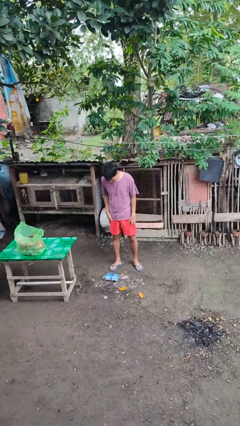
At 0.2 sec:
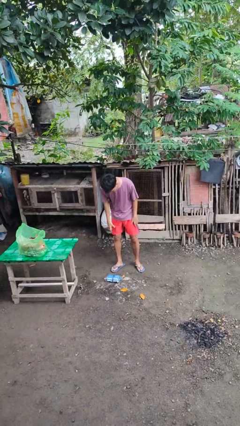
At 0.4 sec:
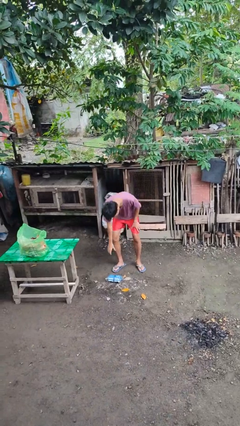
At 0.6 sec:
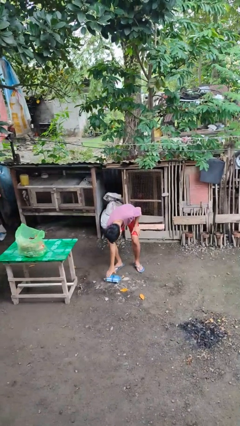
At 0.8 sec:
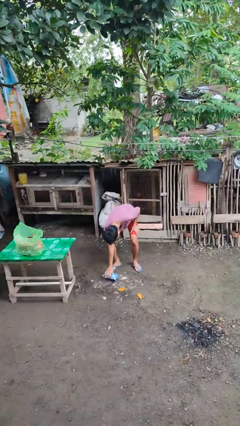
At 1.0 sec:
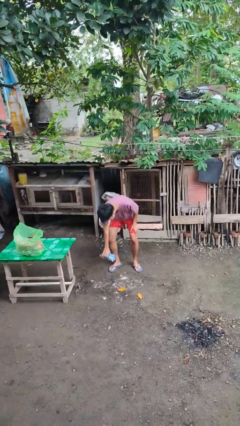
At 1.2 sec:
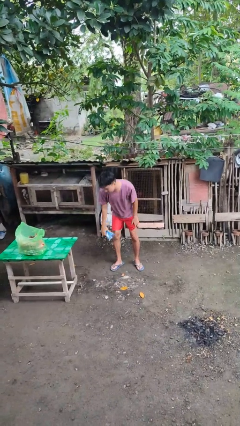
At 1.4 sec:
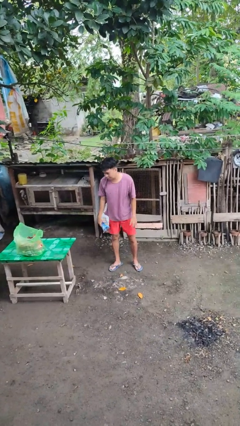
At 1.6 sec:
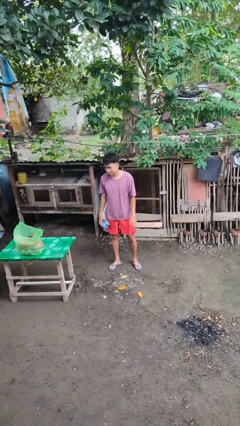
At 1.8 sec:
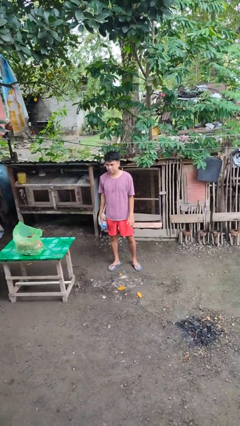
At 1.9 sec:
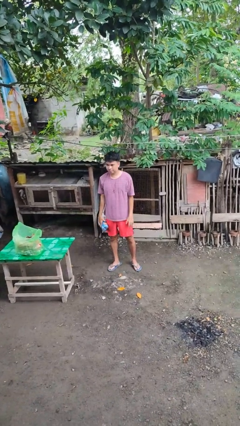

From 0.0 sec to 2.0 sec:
person picks up object from floor

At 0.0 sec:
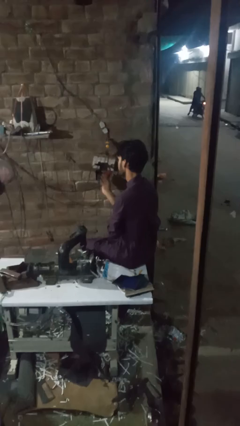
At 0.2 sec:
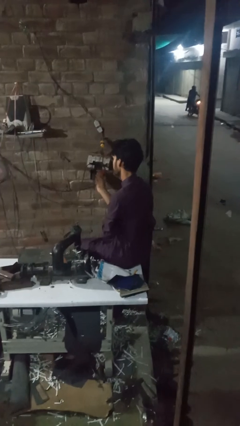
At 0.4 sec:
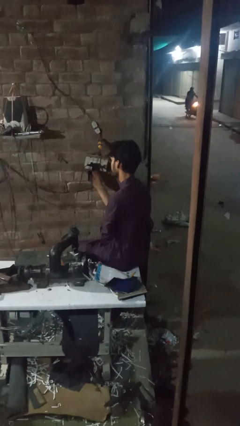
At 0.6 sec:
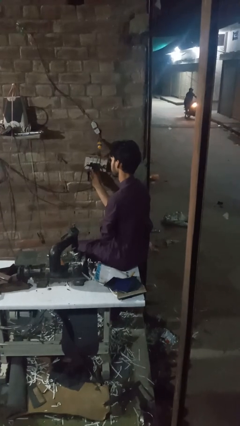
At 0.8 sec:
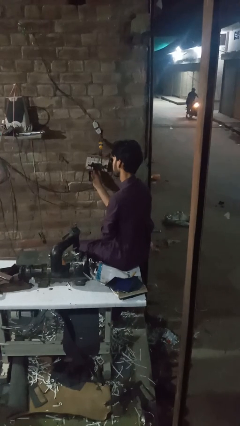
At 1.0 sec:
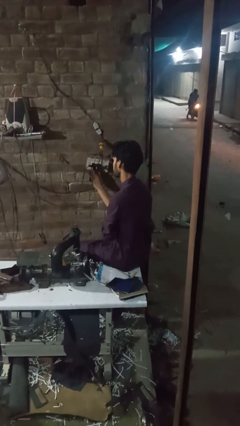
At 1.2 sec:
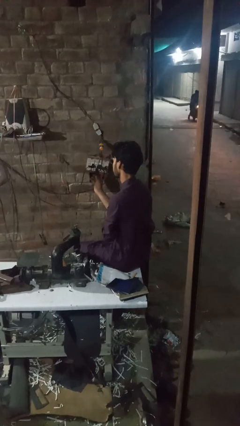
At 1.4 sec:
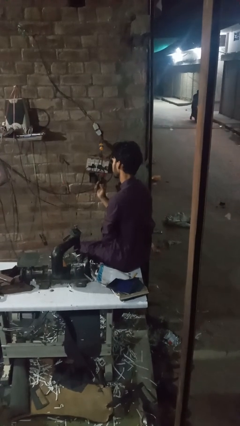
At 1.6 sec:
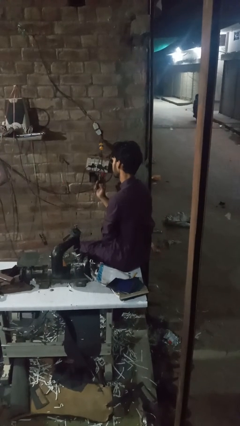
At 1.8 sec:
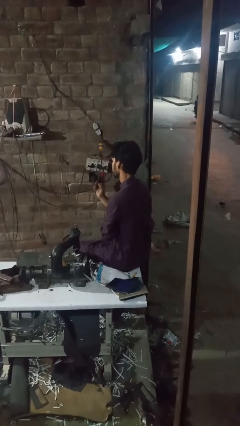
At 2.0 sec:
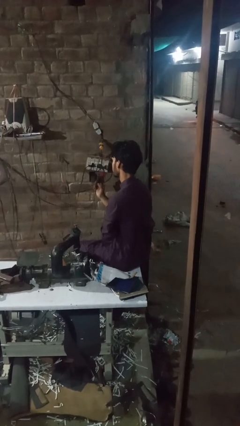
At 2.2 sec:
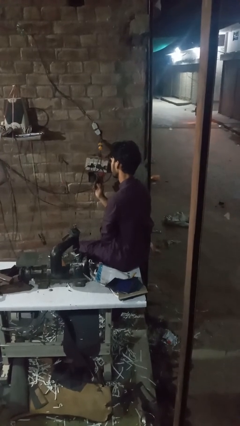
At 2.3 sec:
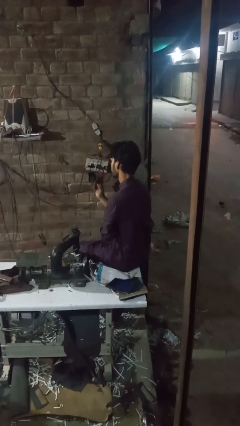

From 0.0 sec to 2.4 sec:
person unplugs from electrical socket

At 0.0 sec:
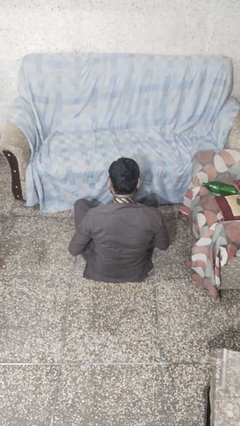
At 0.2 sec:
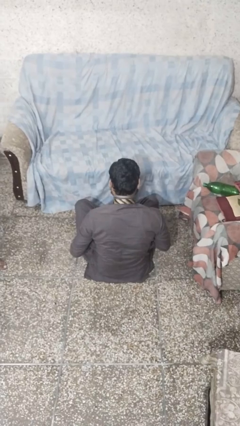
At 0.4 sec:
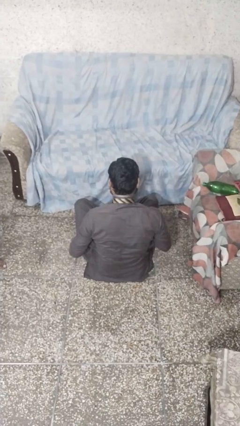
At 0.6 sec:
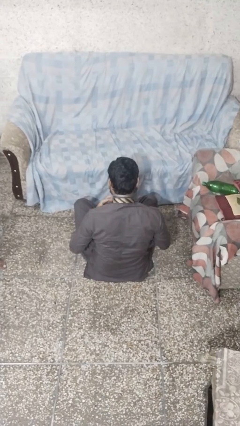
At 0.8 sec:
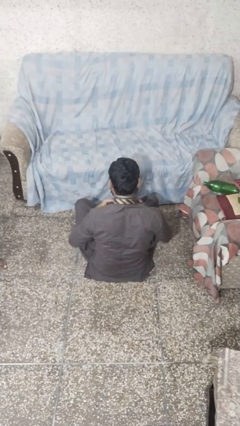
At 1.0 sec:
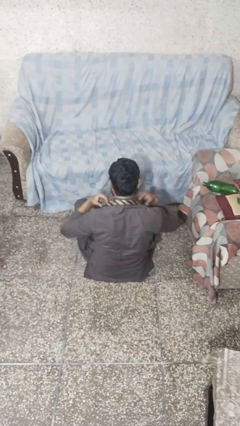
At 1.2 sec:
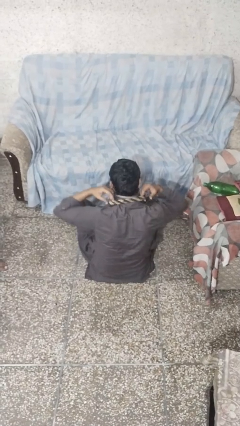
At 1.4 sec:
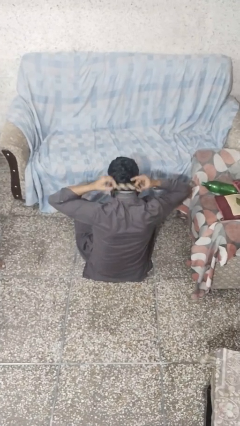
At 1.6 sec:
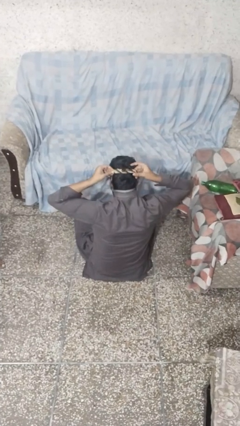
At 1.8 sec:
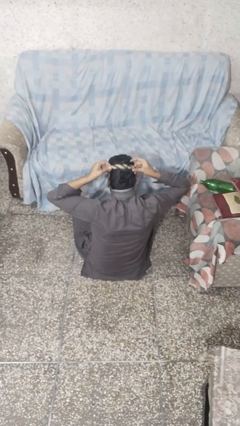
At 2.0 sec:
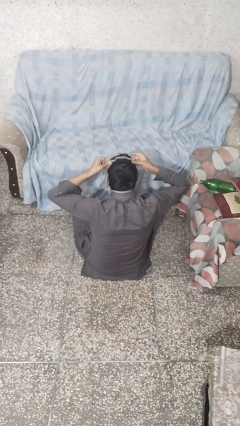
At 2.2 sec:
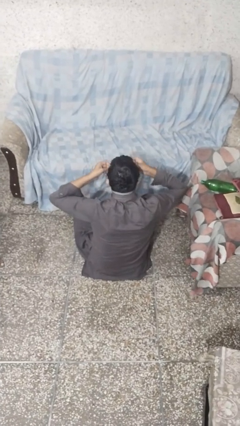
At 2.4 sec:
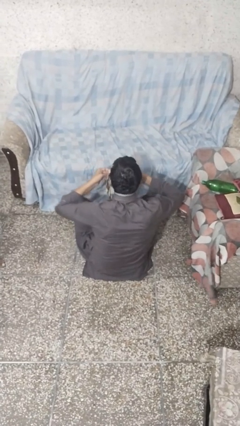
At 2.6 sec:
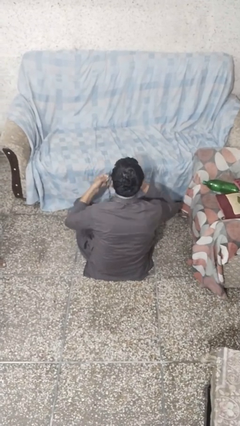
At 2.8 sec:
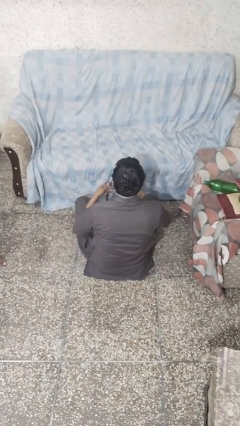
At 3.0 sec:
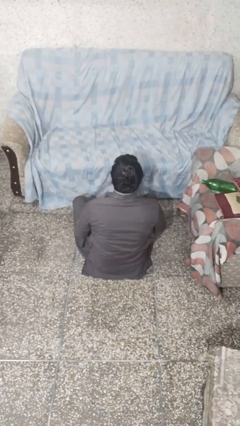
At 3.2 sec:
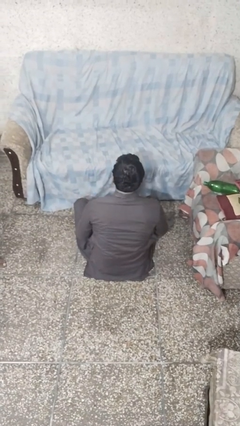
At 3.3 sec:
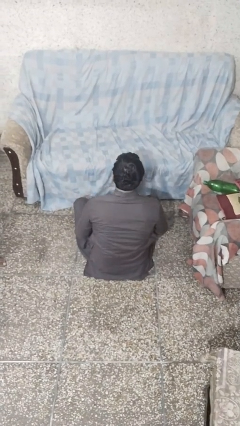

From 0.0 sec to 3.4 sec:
person takes off necktie

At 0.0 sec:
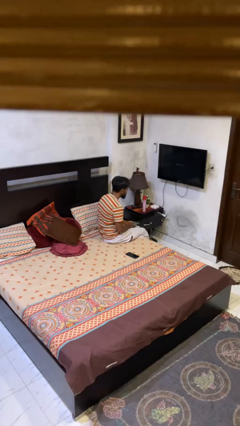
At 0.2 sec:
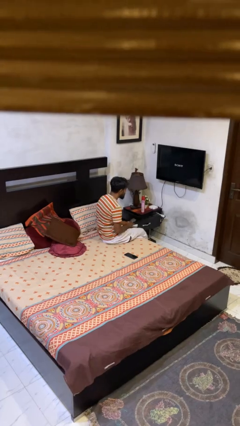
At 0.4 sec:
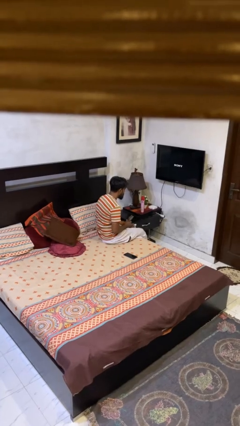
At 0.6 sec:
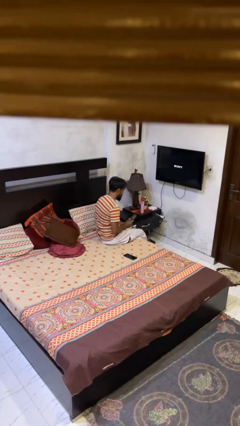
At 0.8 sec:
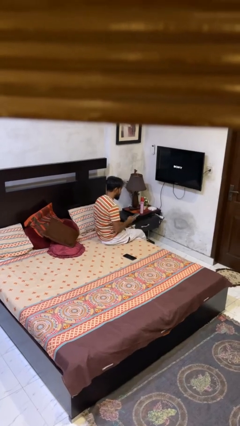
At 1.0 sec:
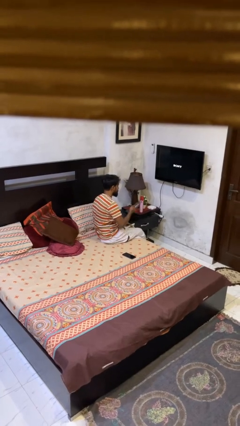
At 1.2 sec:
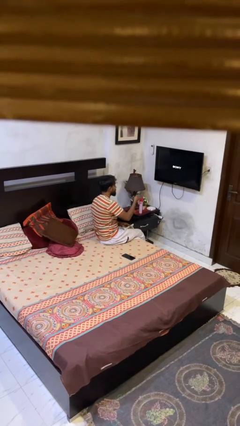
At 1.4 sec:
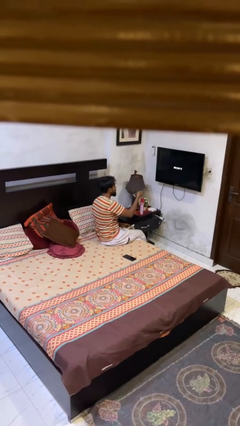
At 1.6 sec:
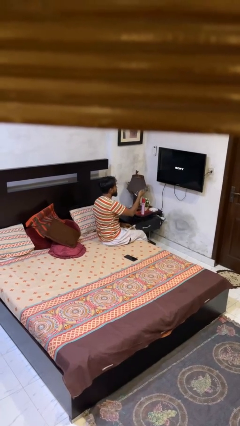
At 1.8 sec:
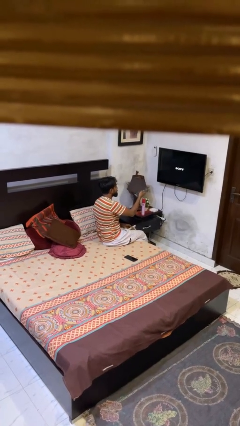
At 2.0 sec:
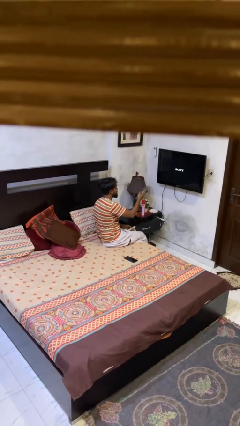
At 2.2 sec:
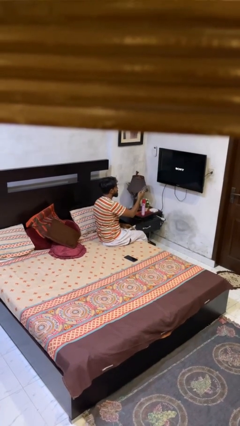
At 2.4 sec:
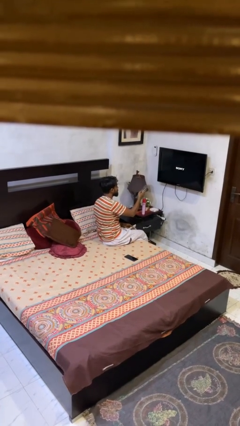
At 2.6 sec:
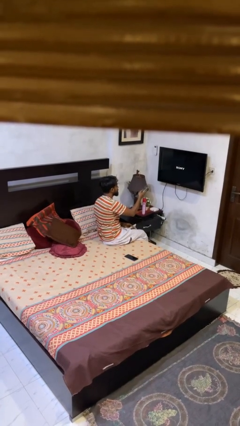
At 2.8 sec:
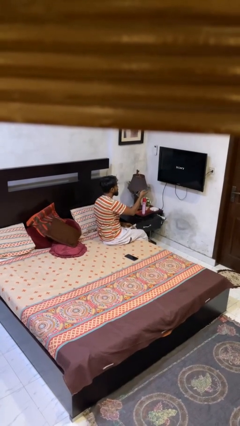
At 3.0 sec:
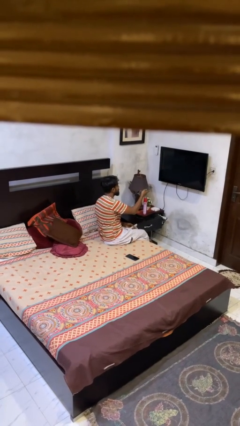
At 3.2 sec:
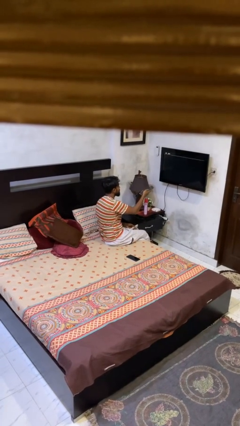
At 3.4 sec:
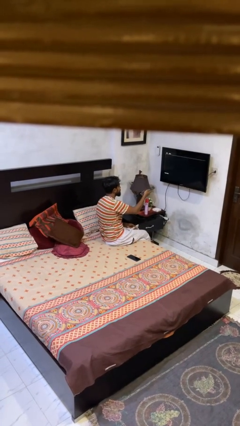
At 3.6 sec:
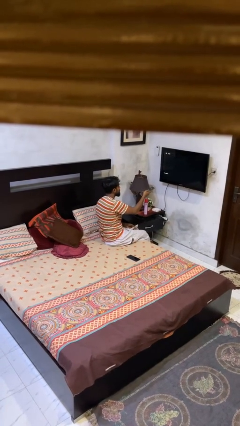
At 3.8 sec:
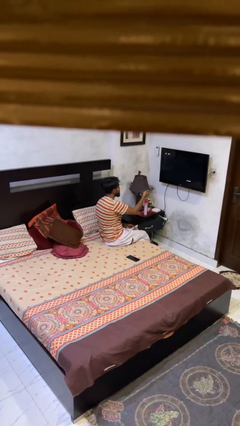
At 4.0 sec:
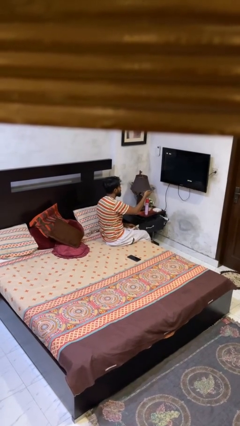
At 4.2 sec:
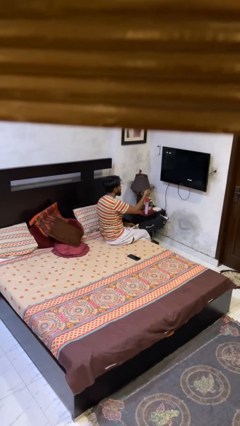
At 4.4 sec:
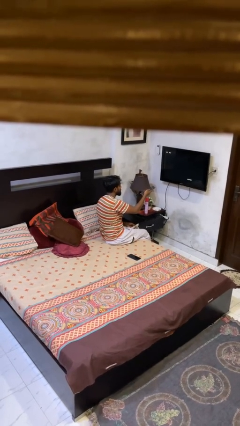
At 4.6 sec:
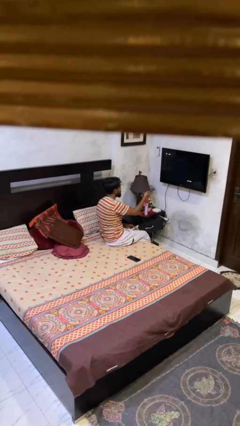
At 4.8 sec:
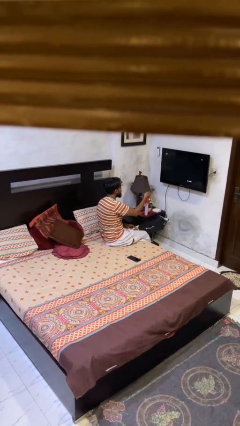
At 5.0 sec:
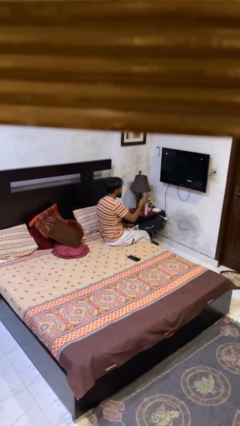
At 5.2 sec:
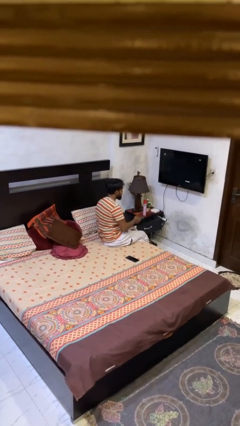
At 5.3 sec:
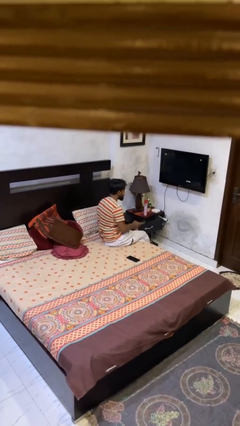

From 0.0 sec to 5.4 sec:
person uses television remote

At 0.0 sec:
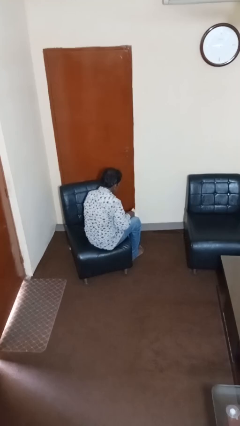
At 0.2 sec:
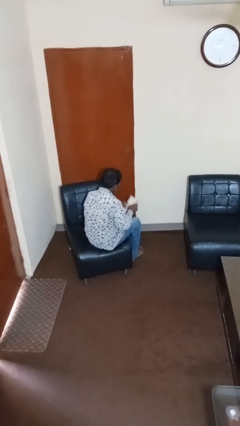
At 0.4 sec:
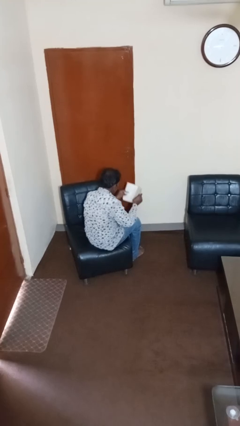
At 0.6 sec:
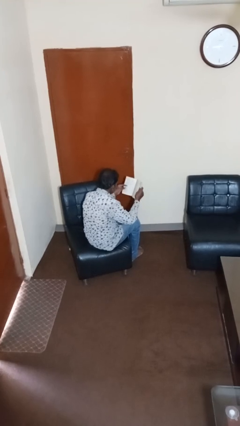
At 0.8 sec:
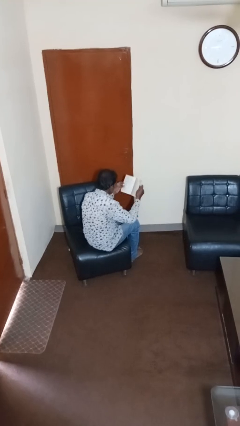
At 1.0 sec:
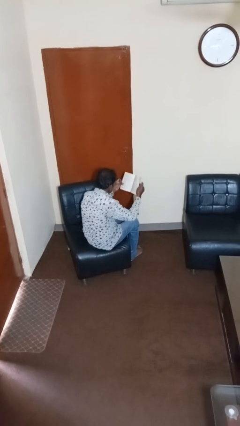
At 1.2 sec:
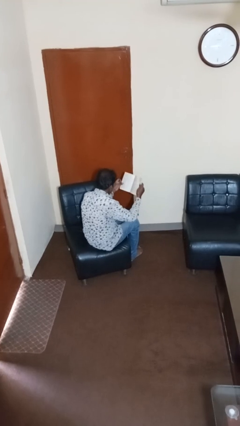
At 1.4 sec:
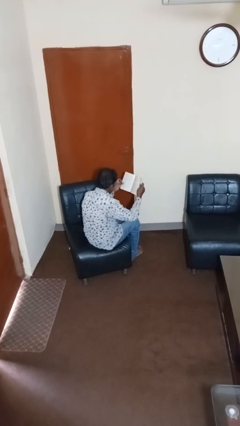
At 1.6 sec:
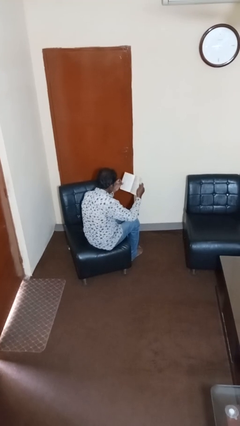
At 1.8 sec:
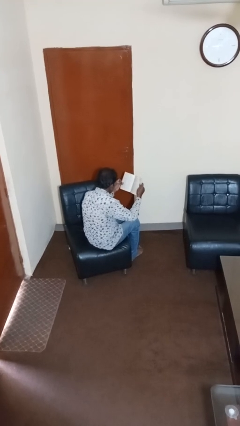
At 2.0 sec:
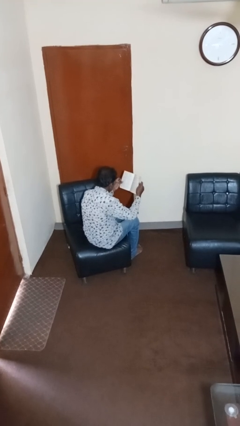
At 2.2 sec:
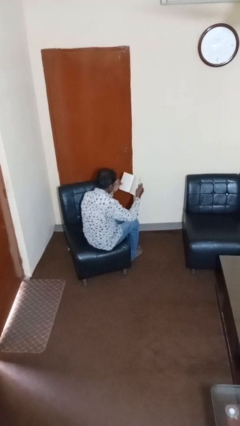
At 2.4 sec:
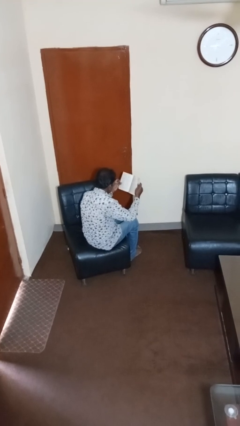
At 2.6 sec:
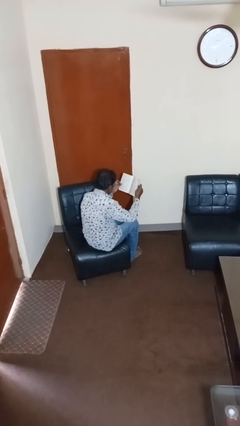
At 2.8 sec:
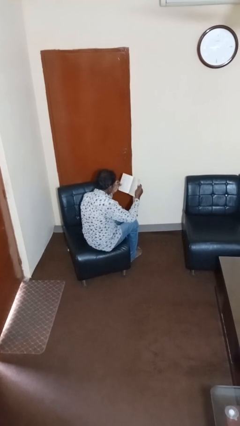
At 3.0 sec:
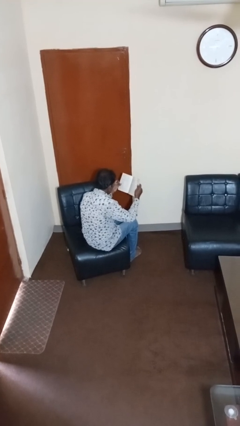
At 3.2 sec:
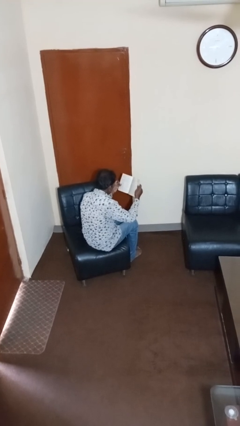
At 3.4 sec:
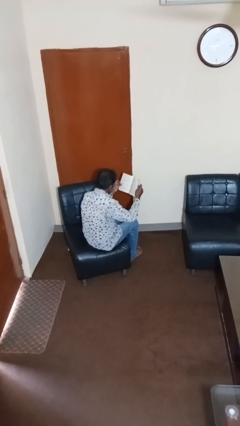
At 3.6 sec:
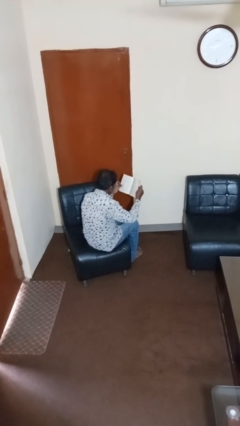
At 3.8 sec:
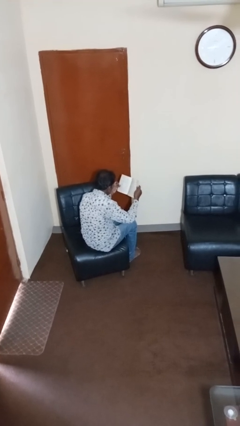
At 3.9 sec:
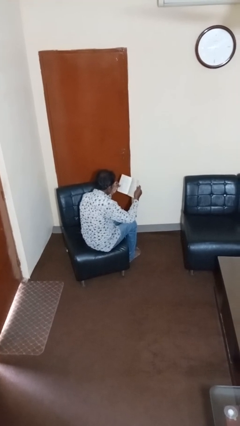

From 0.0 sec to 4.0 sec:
person reads book
